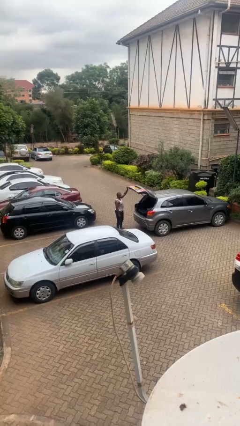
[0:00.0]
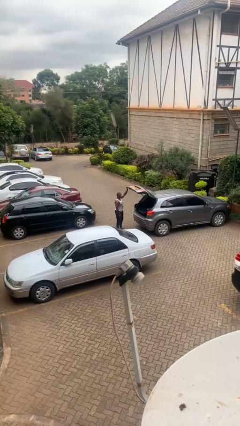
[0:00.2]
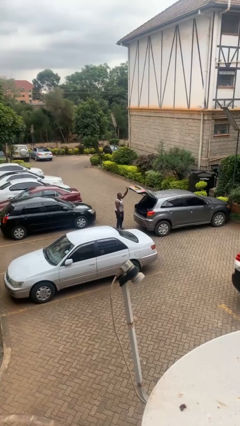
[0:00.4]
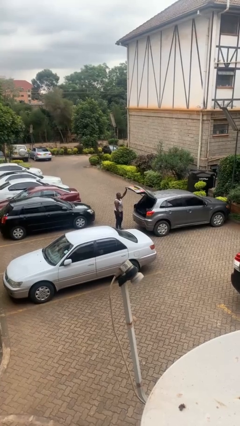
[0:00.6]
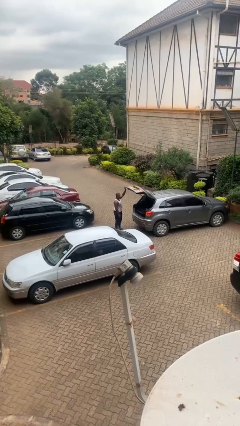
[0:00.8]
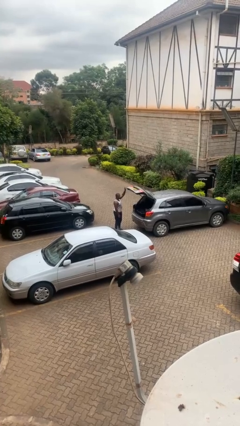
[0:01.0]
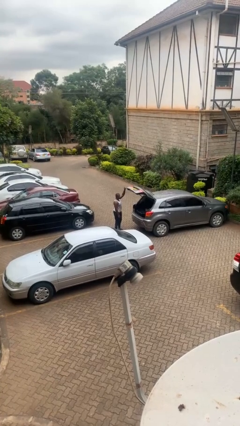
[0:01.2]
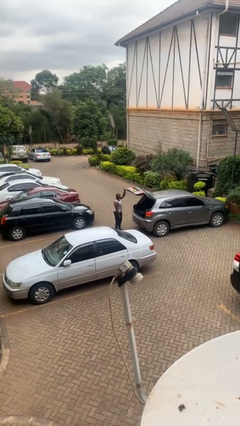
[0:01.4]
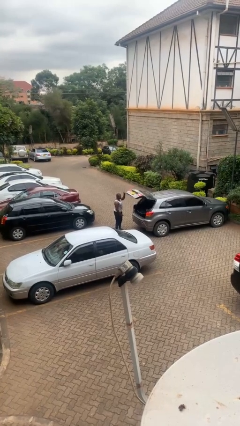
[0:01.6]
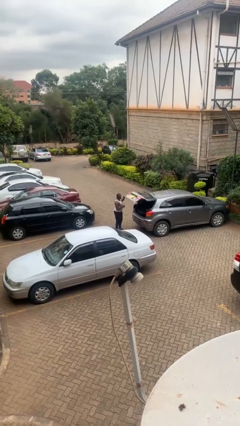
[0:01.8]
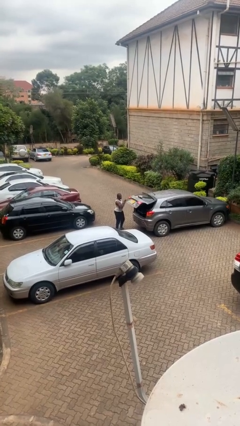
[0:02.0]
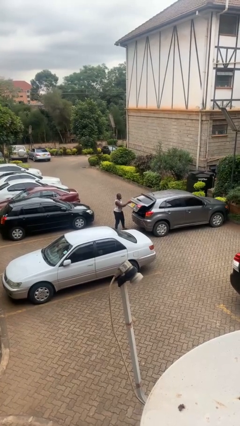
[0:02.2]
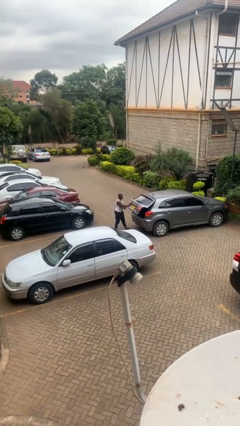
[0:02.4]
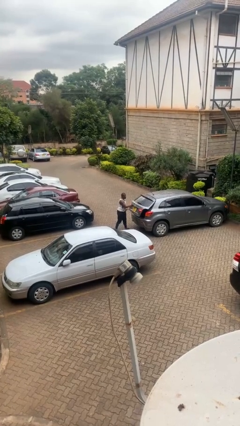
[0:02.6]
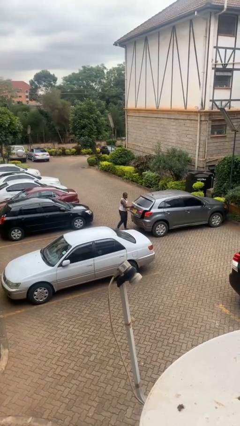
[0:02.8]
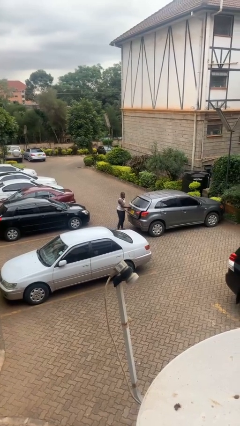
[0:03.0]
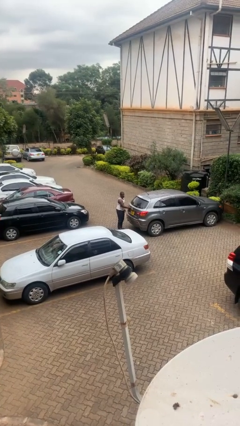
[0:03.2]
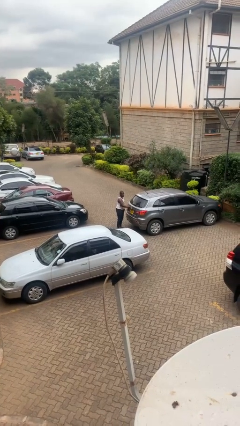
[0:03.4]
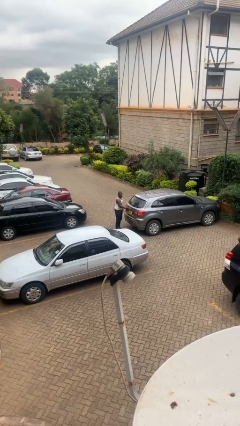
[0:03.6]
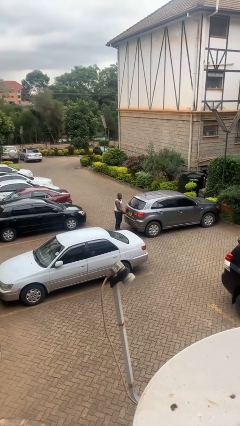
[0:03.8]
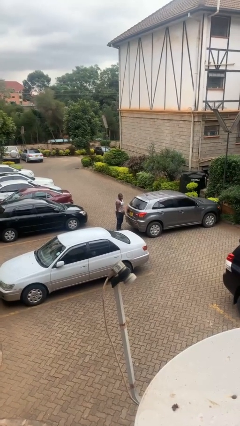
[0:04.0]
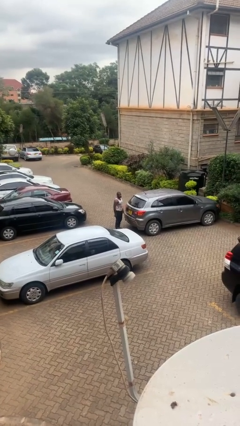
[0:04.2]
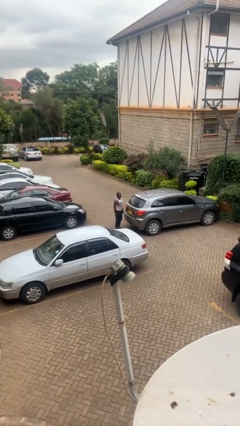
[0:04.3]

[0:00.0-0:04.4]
person closes car trunk

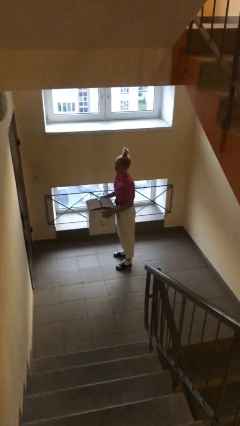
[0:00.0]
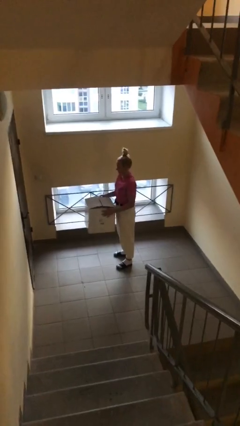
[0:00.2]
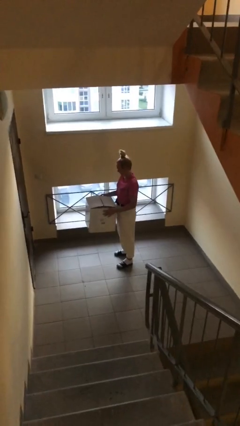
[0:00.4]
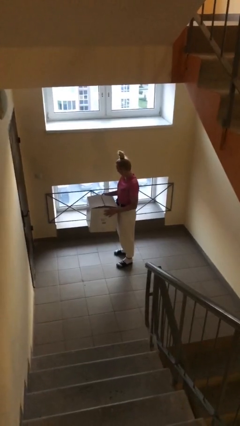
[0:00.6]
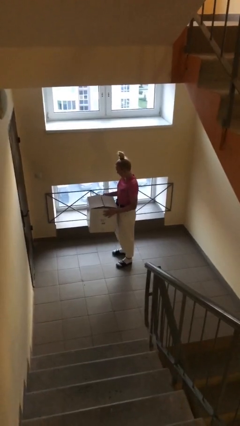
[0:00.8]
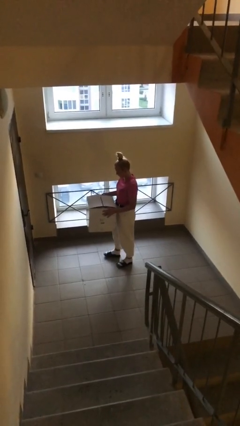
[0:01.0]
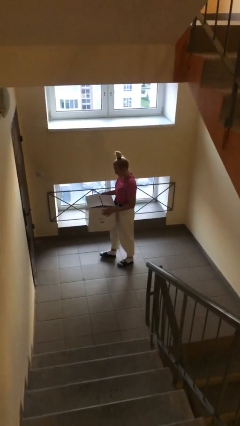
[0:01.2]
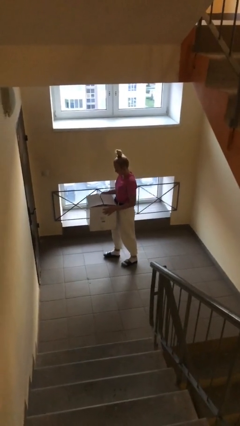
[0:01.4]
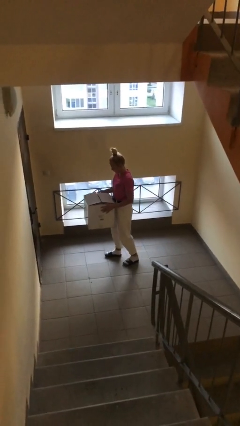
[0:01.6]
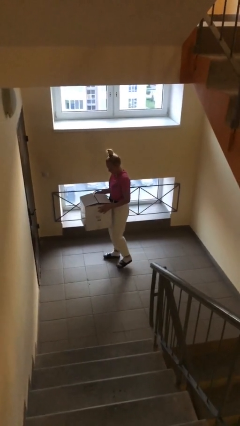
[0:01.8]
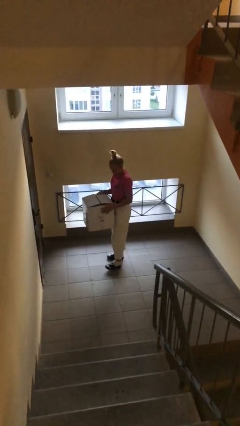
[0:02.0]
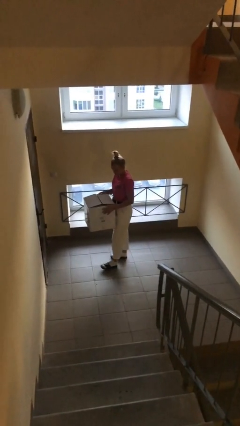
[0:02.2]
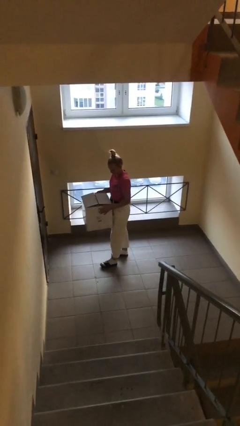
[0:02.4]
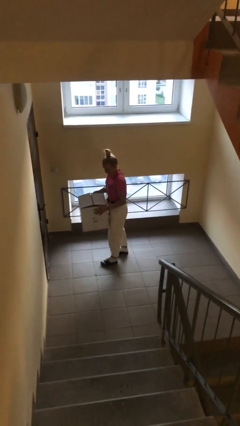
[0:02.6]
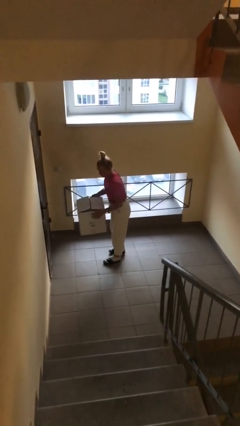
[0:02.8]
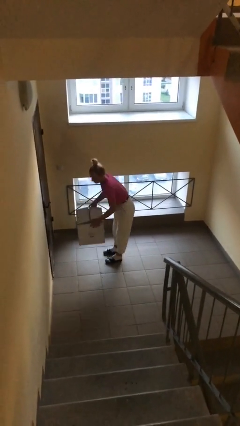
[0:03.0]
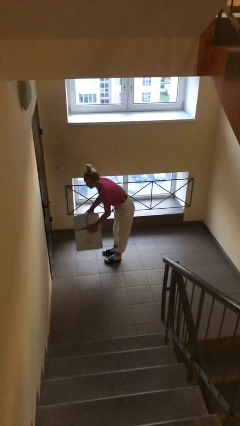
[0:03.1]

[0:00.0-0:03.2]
person carries heavy object

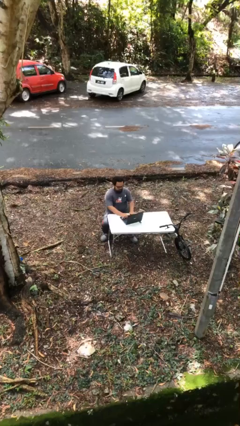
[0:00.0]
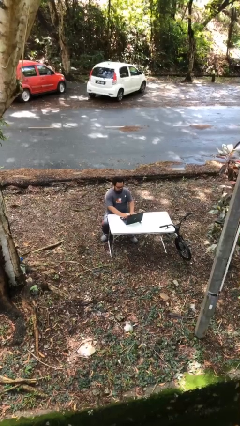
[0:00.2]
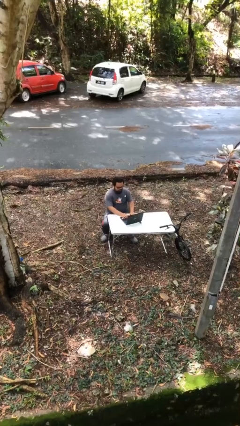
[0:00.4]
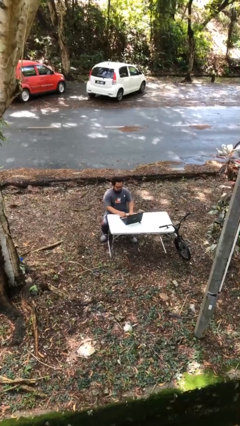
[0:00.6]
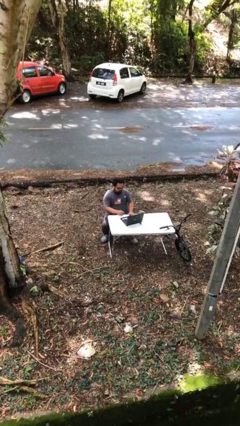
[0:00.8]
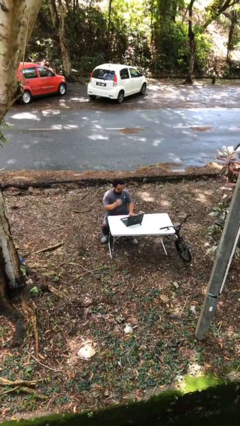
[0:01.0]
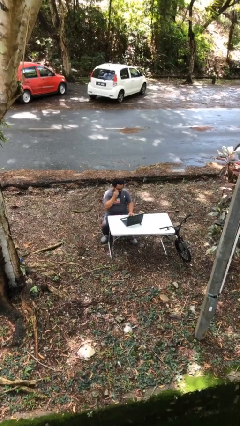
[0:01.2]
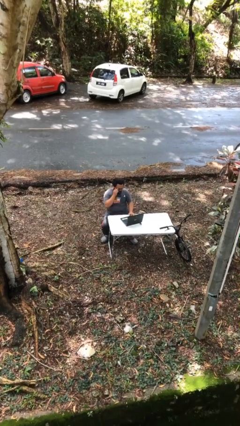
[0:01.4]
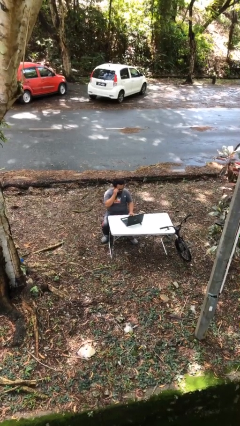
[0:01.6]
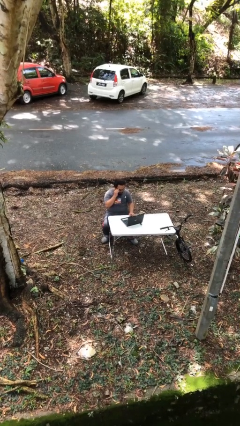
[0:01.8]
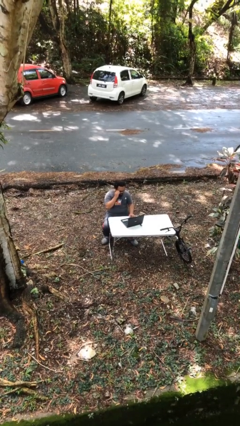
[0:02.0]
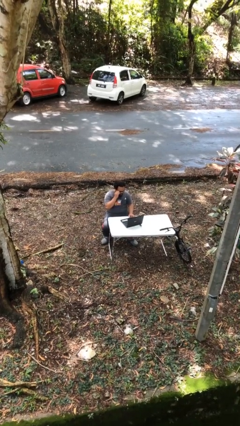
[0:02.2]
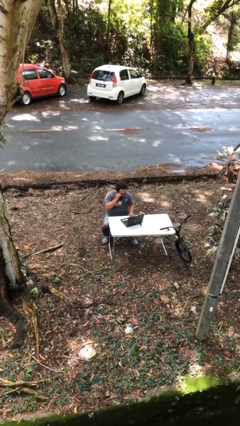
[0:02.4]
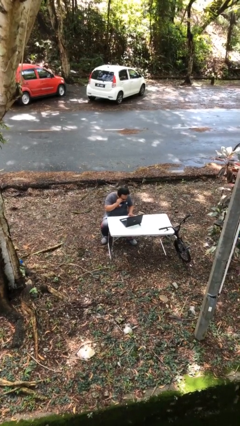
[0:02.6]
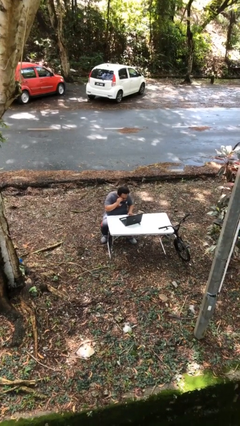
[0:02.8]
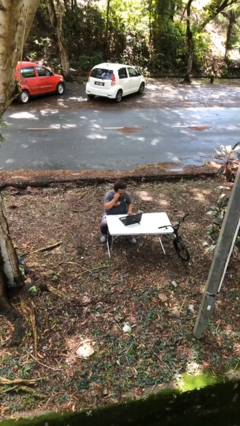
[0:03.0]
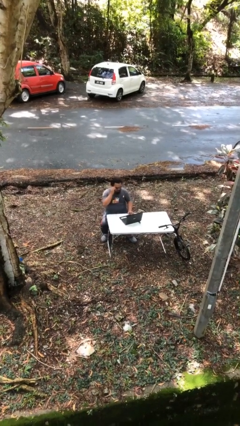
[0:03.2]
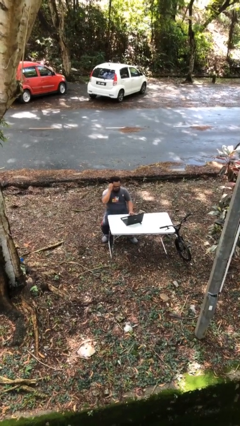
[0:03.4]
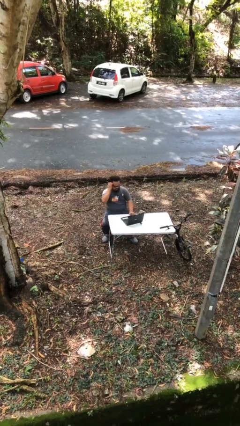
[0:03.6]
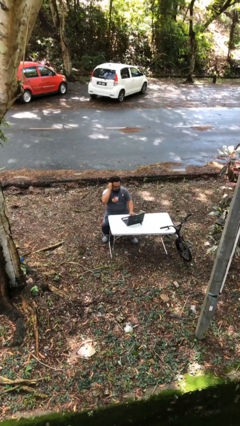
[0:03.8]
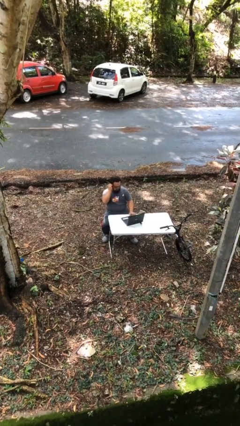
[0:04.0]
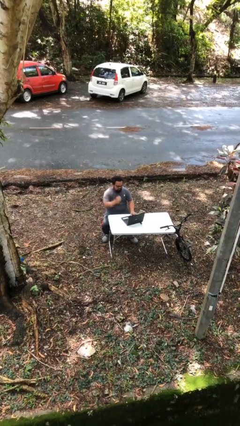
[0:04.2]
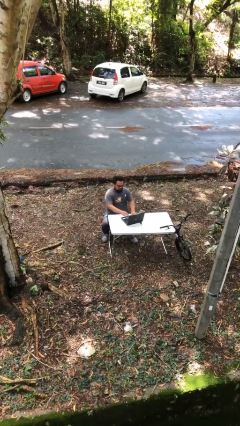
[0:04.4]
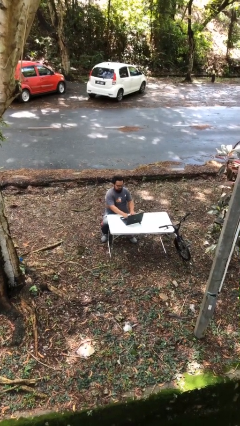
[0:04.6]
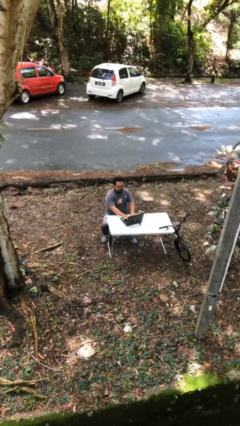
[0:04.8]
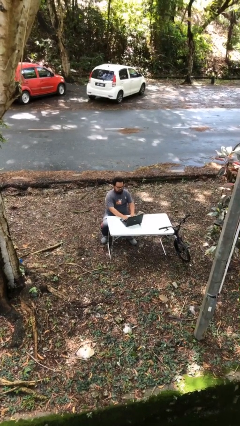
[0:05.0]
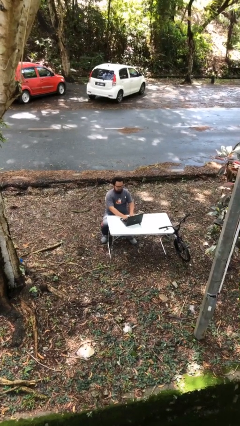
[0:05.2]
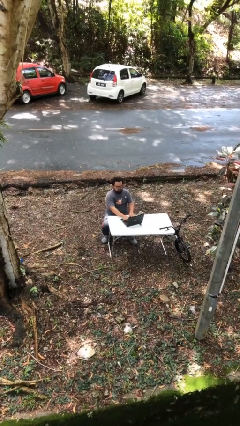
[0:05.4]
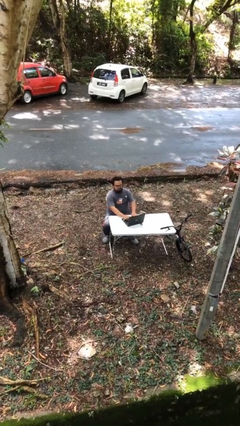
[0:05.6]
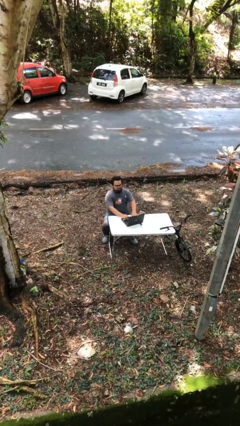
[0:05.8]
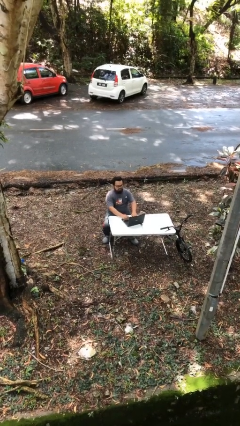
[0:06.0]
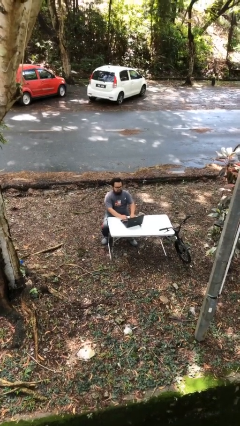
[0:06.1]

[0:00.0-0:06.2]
person interacts with laptop

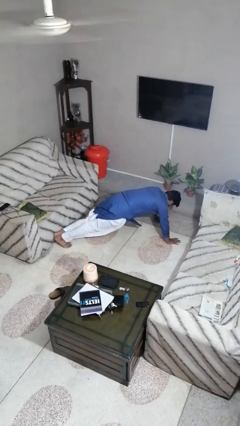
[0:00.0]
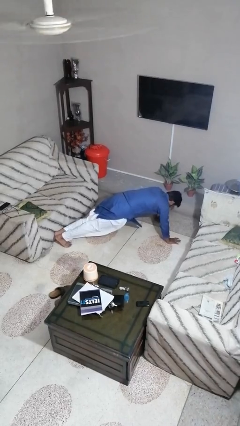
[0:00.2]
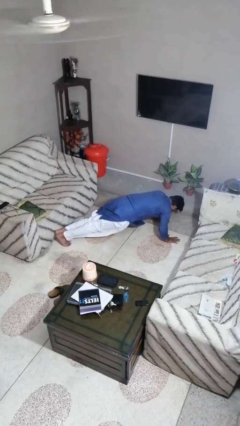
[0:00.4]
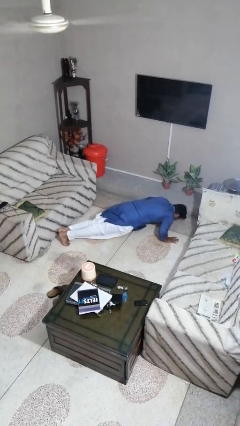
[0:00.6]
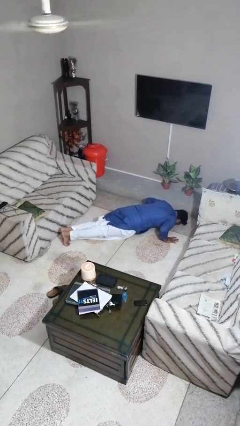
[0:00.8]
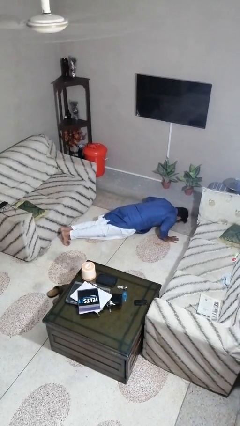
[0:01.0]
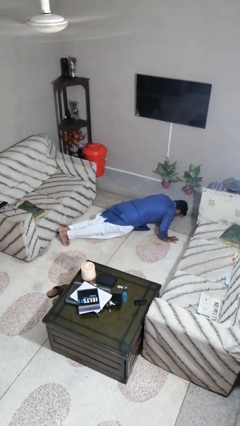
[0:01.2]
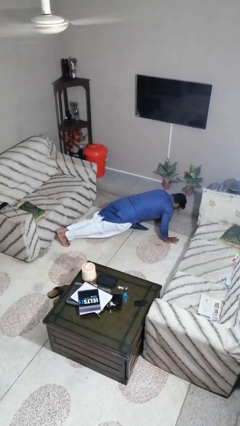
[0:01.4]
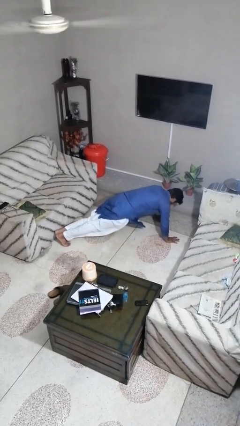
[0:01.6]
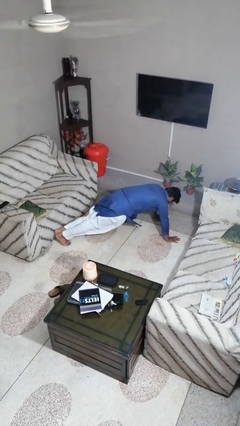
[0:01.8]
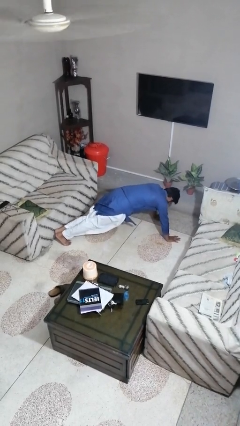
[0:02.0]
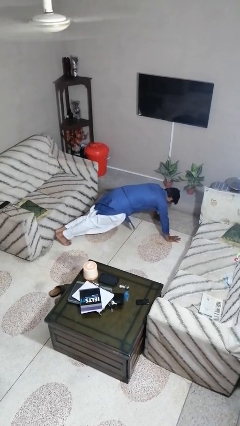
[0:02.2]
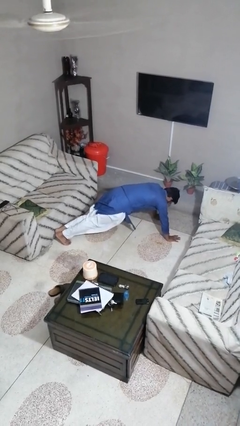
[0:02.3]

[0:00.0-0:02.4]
person exercises with pushup

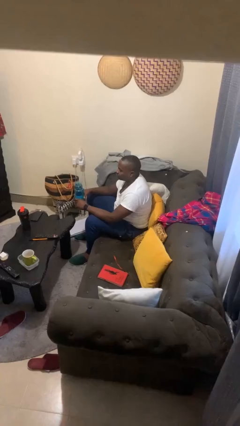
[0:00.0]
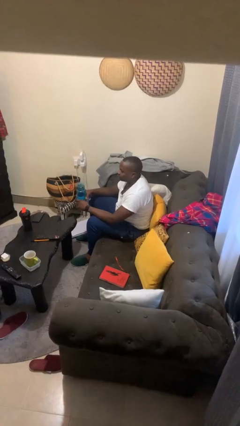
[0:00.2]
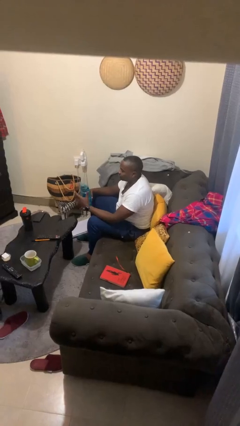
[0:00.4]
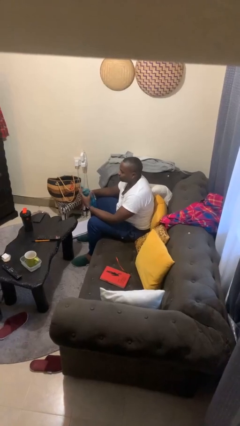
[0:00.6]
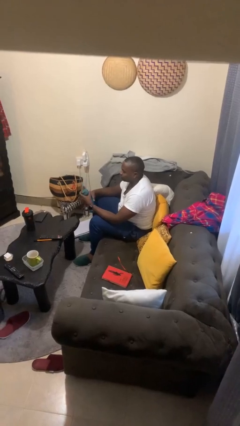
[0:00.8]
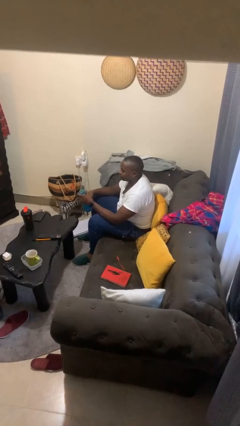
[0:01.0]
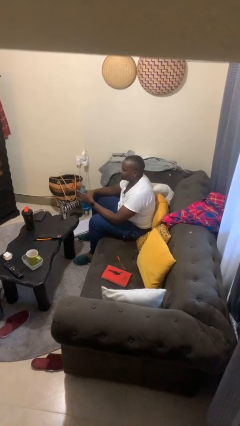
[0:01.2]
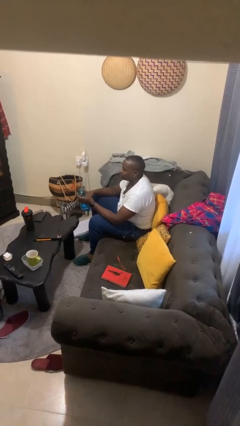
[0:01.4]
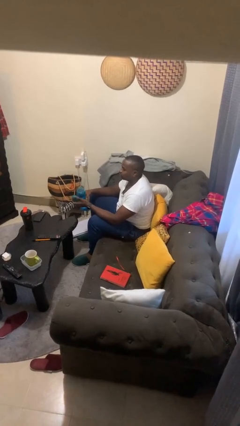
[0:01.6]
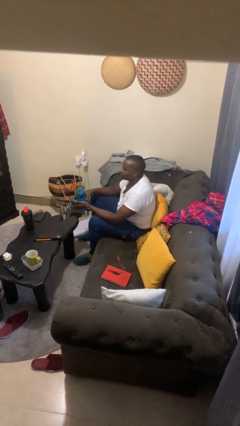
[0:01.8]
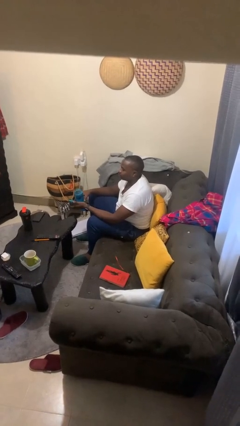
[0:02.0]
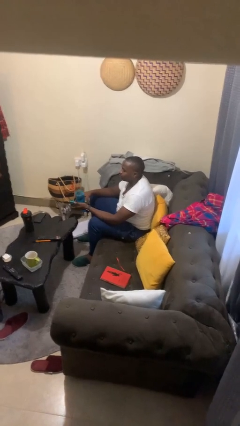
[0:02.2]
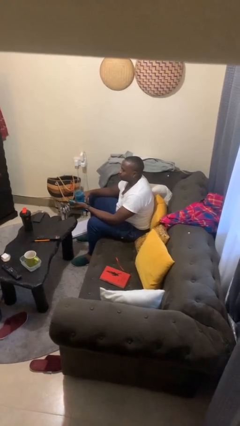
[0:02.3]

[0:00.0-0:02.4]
person unscrews lid from bottle
